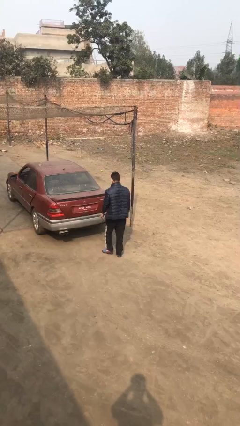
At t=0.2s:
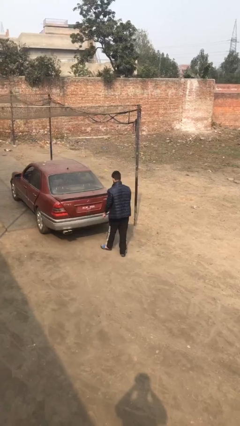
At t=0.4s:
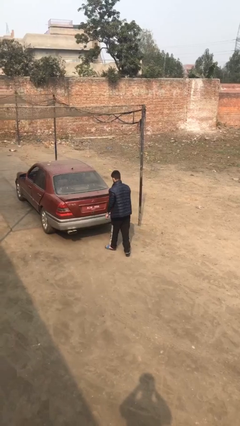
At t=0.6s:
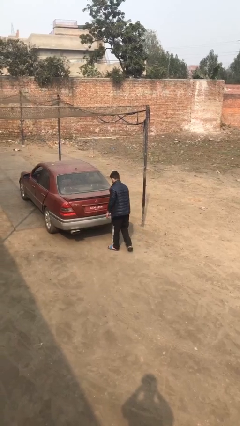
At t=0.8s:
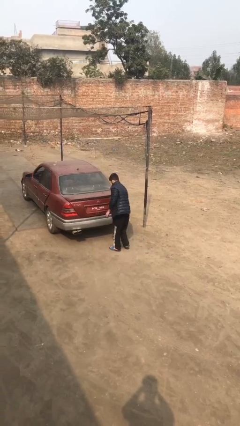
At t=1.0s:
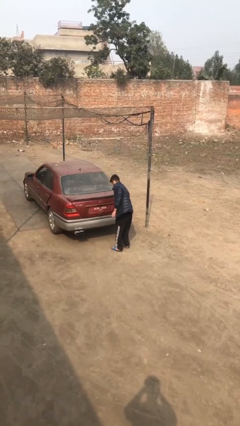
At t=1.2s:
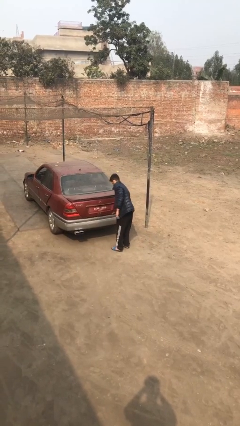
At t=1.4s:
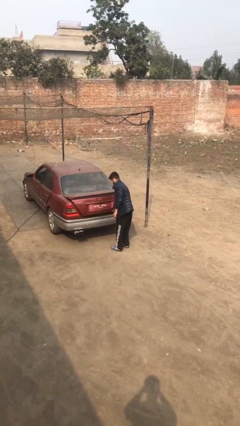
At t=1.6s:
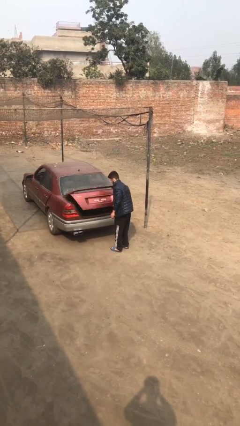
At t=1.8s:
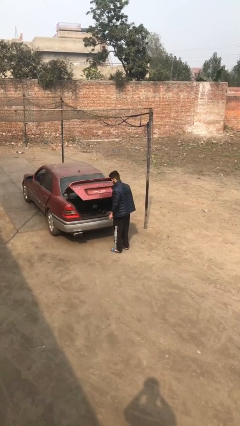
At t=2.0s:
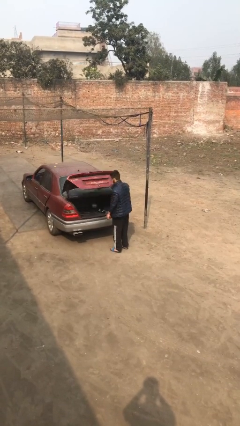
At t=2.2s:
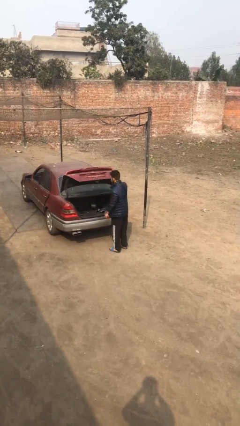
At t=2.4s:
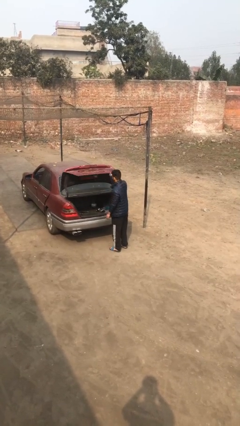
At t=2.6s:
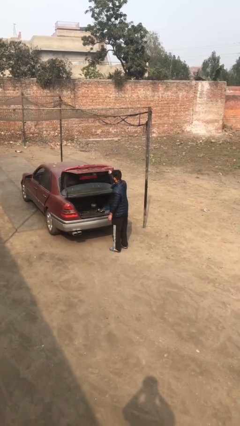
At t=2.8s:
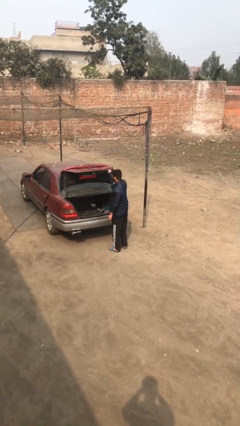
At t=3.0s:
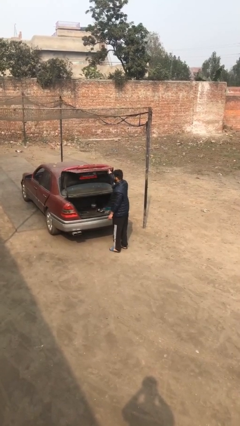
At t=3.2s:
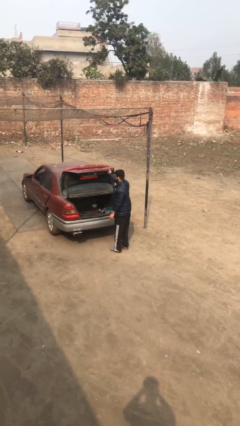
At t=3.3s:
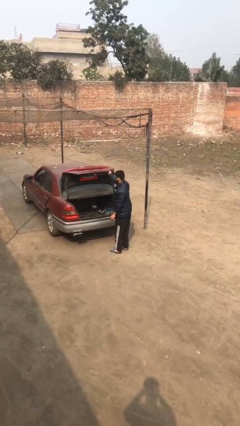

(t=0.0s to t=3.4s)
person opens car trunk

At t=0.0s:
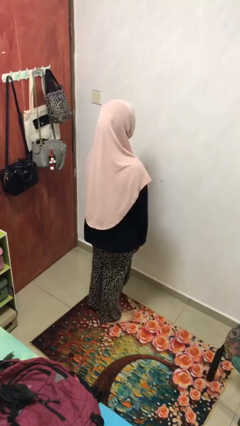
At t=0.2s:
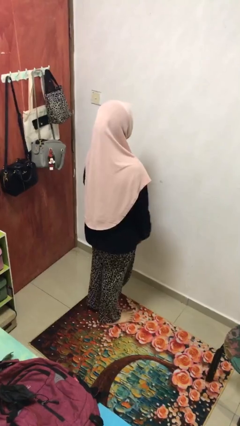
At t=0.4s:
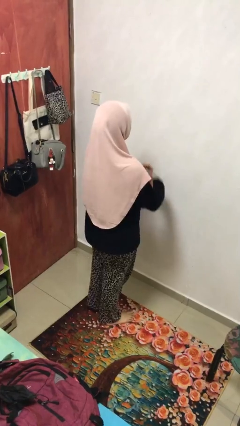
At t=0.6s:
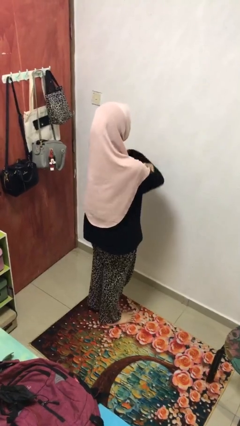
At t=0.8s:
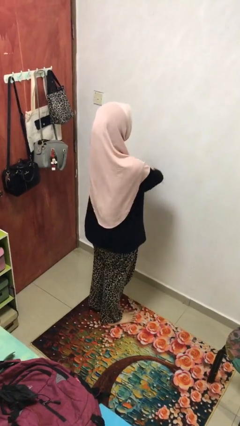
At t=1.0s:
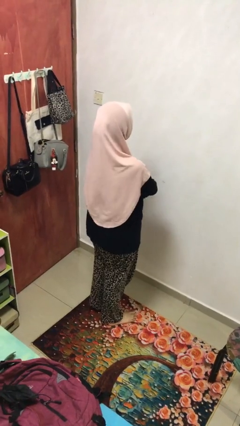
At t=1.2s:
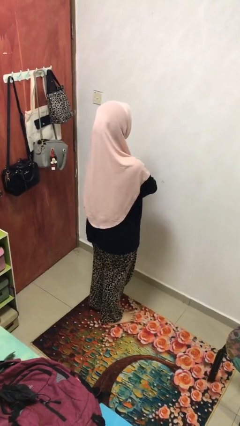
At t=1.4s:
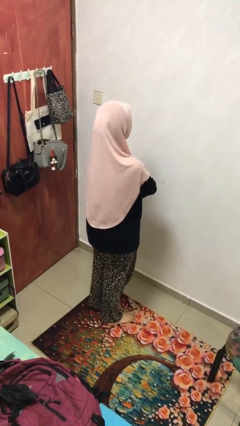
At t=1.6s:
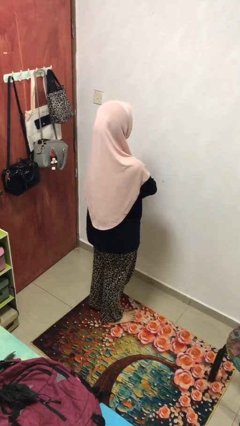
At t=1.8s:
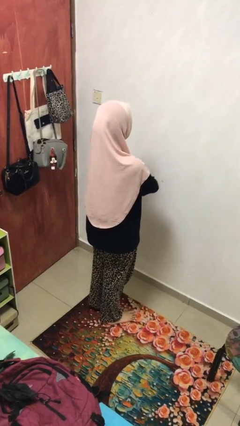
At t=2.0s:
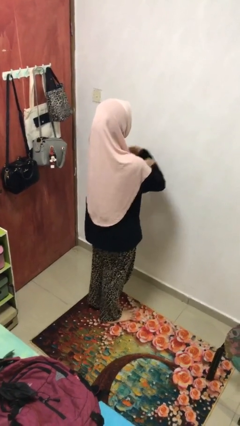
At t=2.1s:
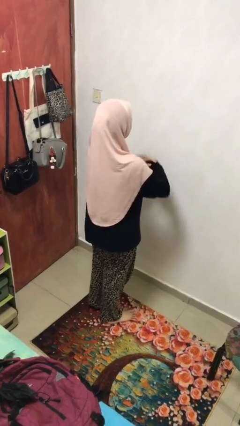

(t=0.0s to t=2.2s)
person crosses arms

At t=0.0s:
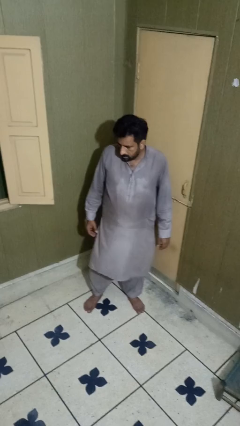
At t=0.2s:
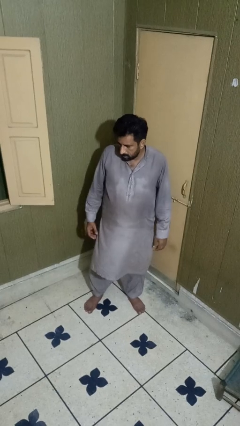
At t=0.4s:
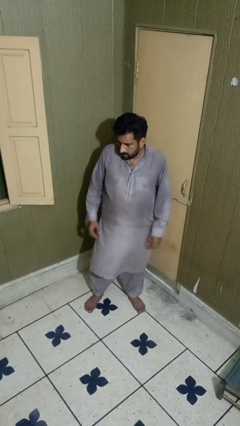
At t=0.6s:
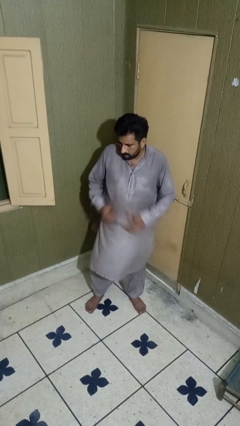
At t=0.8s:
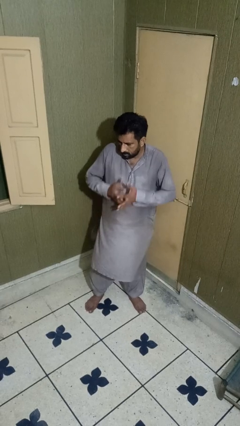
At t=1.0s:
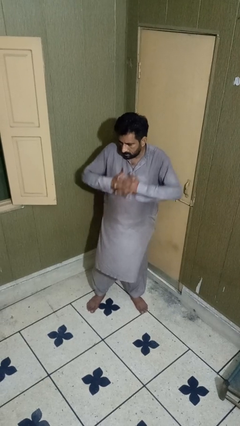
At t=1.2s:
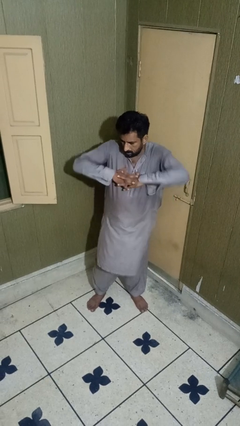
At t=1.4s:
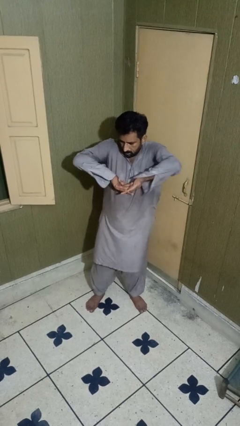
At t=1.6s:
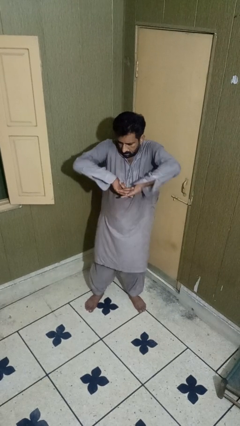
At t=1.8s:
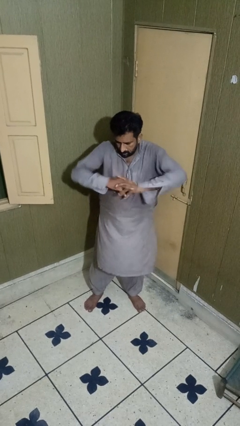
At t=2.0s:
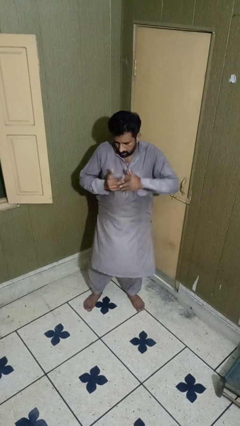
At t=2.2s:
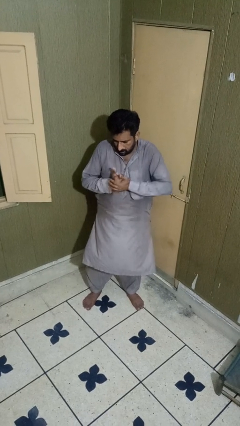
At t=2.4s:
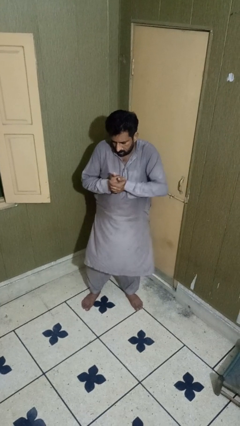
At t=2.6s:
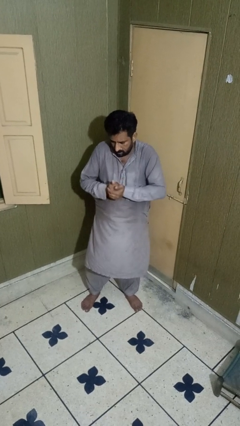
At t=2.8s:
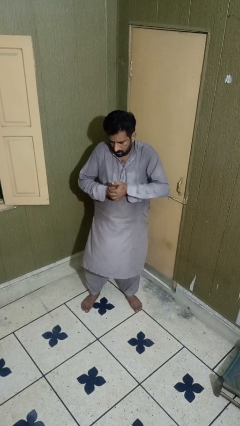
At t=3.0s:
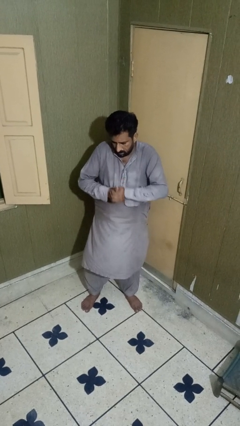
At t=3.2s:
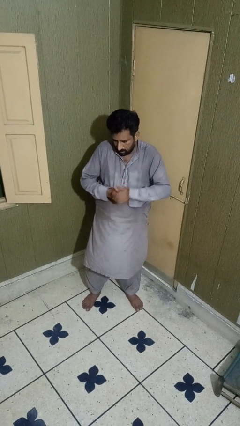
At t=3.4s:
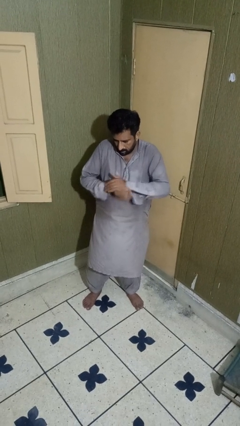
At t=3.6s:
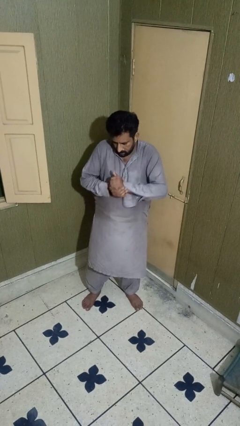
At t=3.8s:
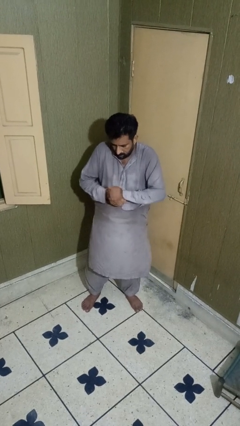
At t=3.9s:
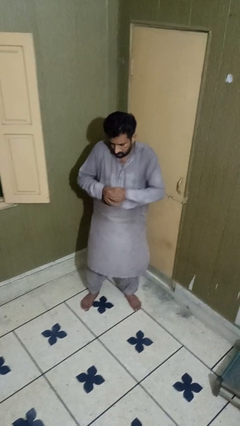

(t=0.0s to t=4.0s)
person cracks knuckles

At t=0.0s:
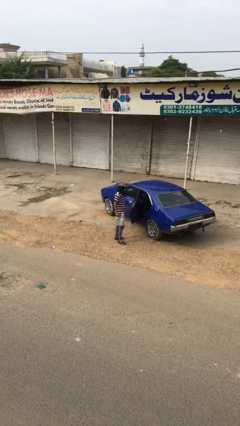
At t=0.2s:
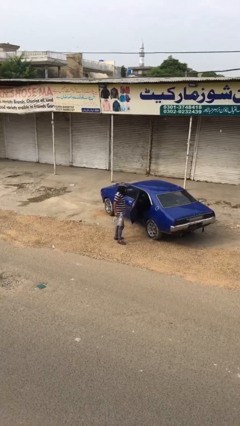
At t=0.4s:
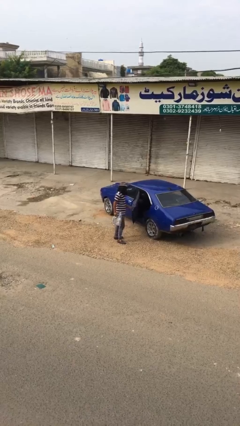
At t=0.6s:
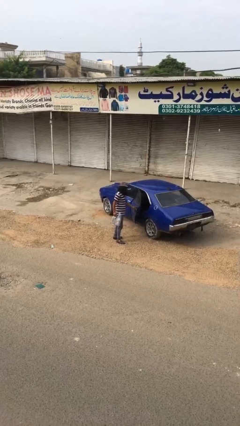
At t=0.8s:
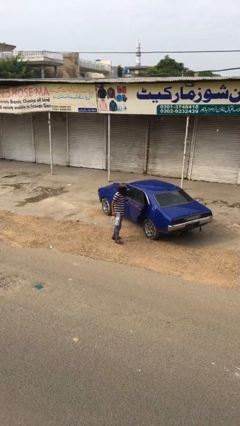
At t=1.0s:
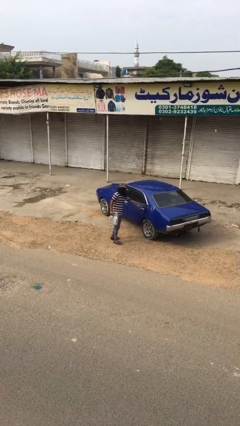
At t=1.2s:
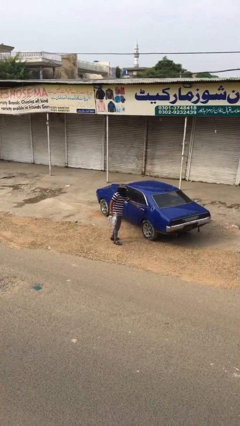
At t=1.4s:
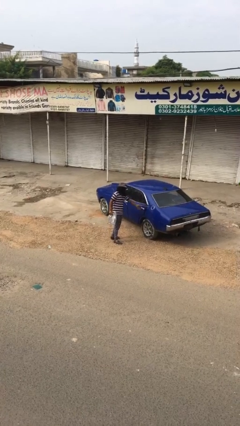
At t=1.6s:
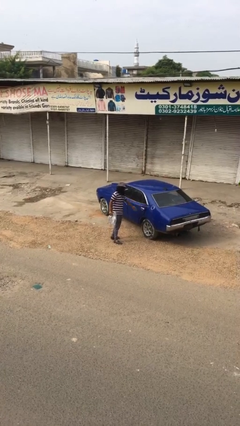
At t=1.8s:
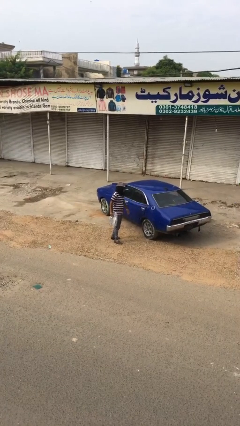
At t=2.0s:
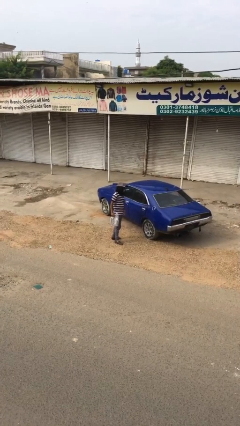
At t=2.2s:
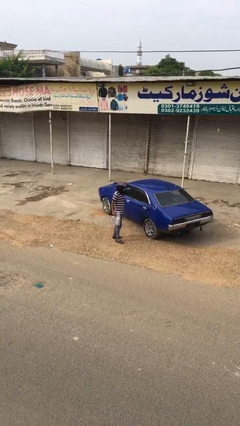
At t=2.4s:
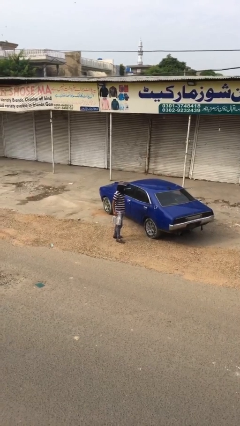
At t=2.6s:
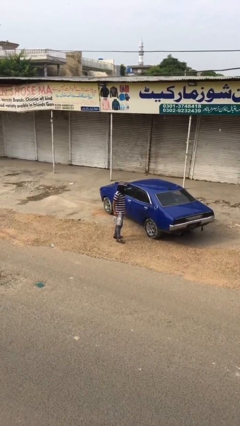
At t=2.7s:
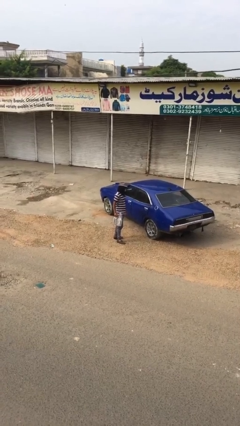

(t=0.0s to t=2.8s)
person closes car door

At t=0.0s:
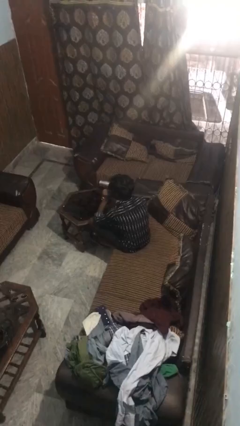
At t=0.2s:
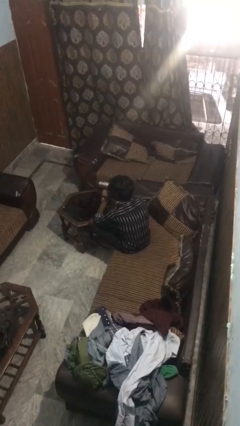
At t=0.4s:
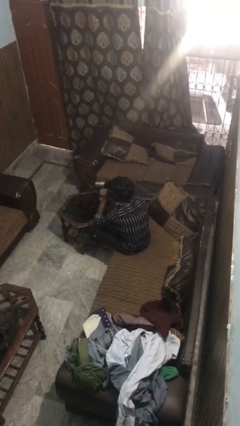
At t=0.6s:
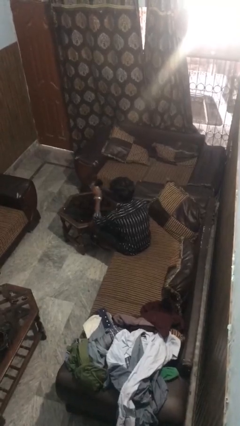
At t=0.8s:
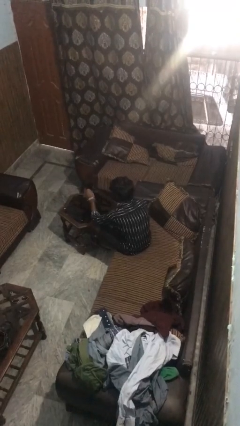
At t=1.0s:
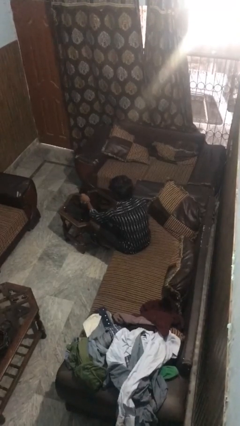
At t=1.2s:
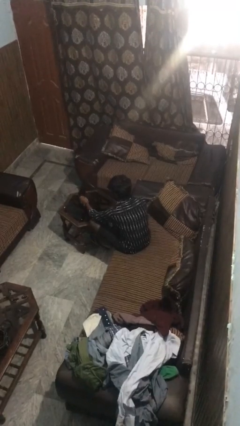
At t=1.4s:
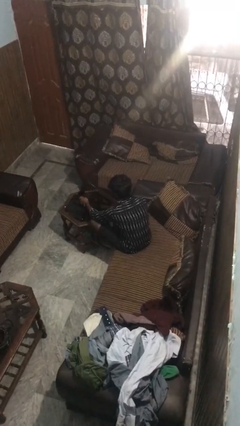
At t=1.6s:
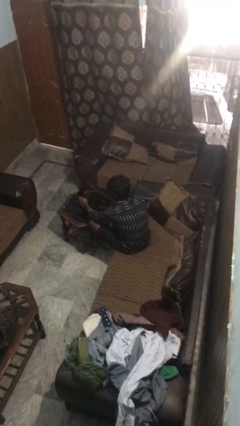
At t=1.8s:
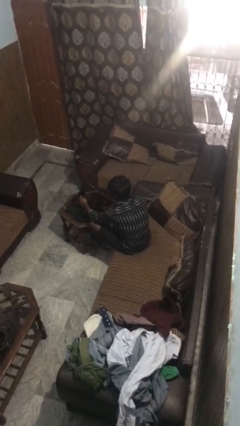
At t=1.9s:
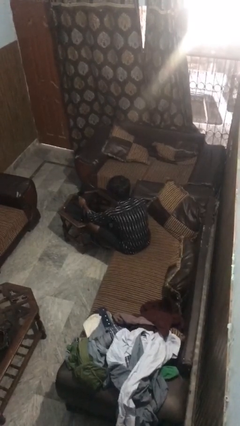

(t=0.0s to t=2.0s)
person puts down object on table

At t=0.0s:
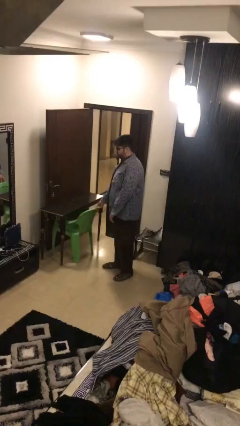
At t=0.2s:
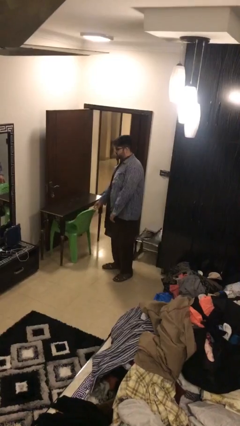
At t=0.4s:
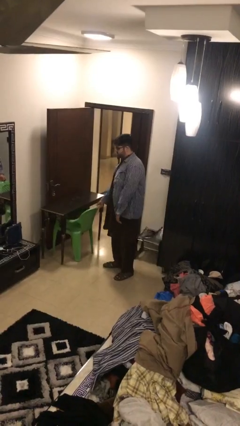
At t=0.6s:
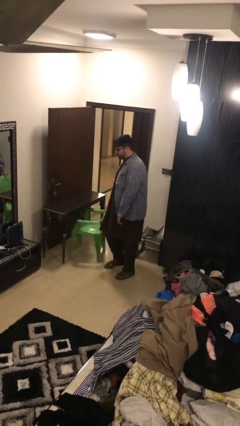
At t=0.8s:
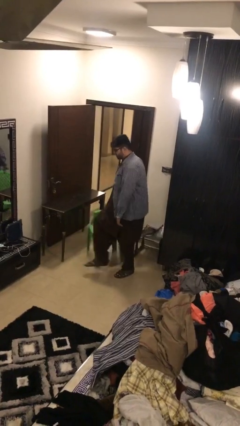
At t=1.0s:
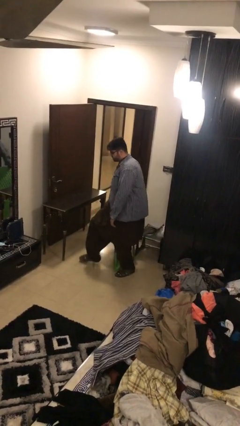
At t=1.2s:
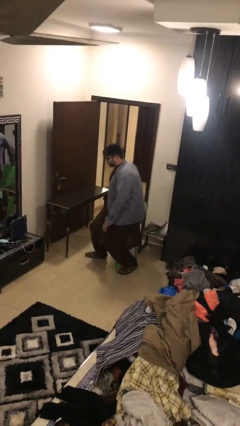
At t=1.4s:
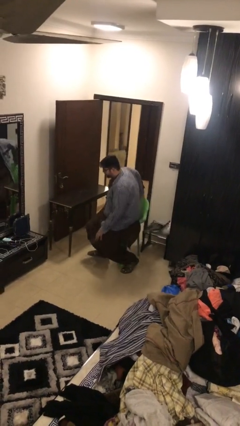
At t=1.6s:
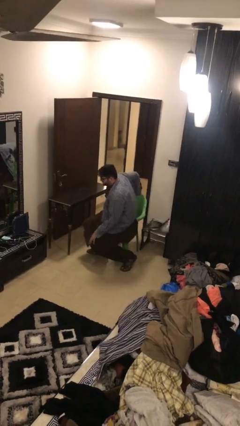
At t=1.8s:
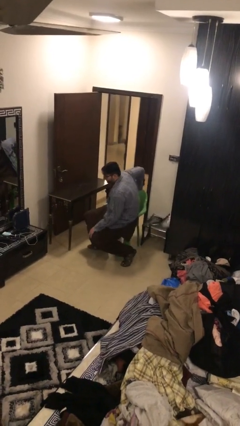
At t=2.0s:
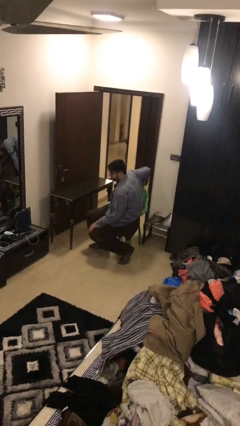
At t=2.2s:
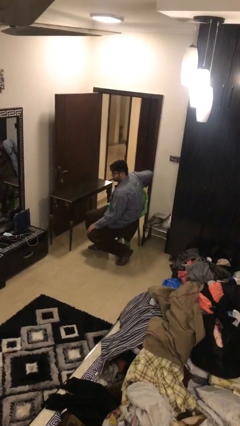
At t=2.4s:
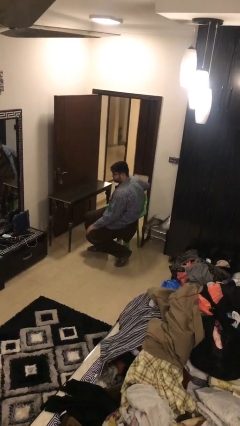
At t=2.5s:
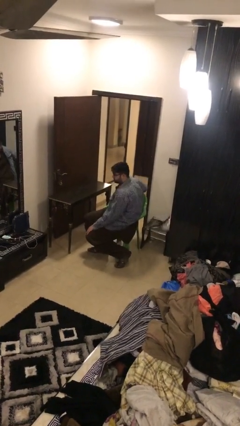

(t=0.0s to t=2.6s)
person sits down
